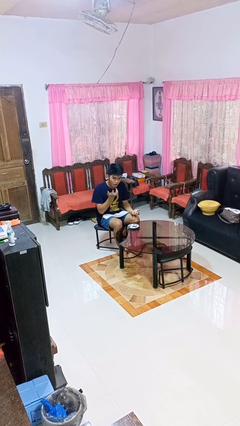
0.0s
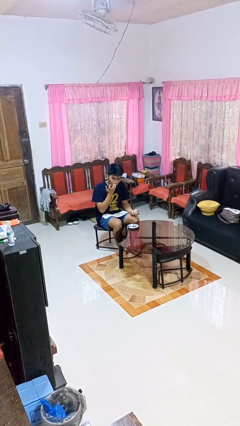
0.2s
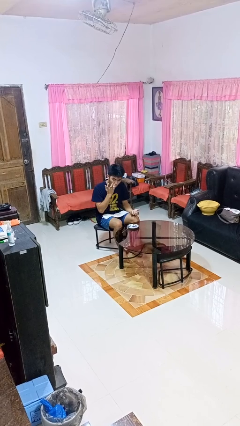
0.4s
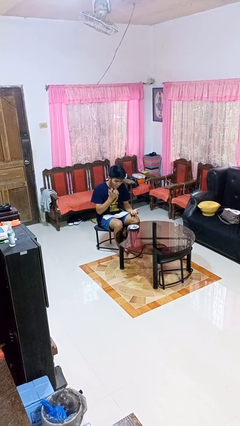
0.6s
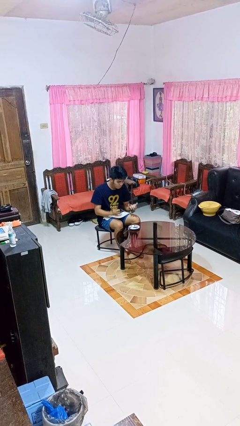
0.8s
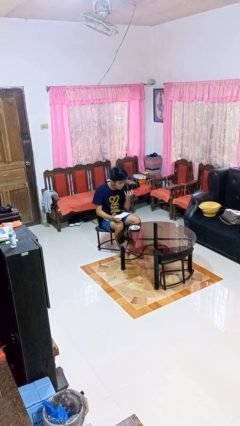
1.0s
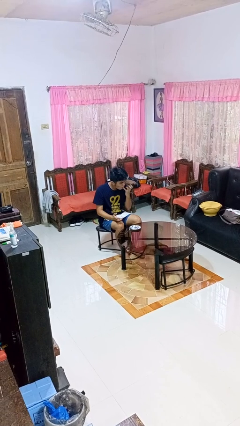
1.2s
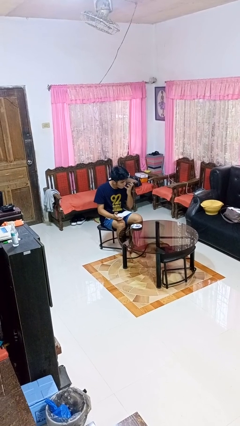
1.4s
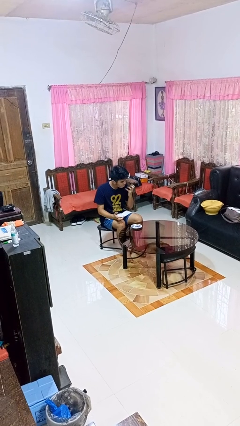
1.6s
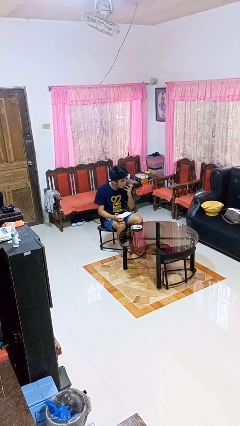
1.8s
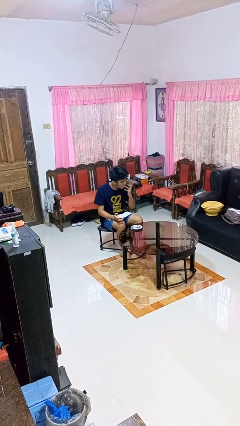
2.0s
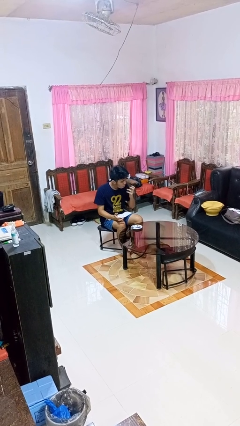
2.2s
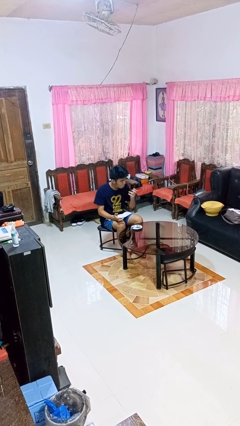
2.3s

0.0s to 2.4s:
person licks fingers

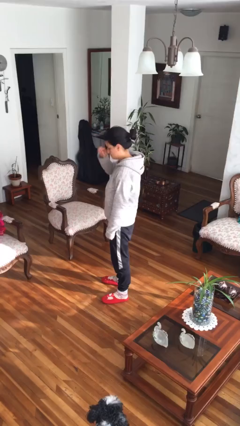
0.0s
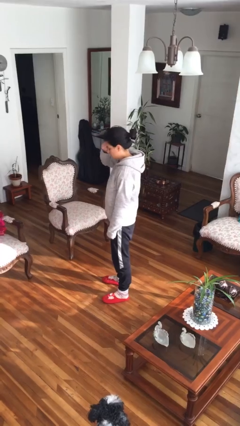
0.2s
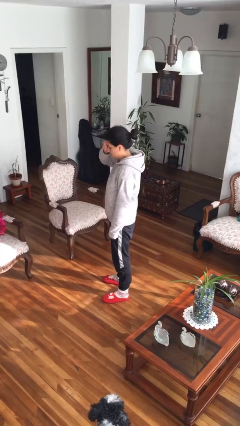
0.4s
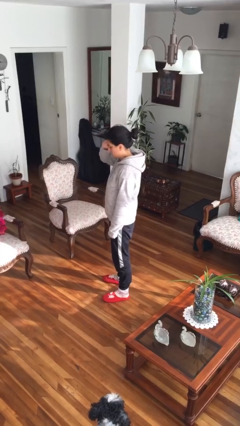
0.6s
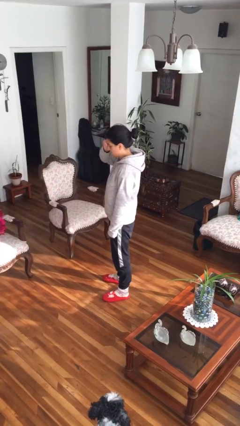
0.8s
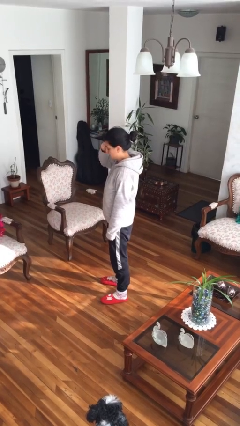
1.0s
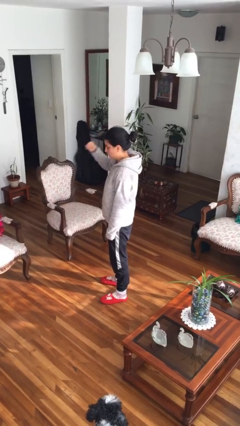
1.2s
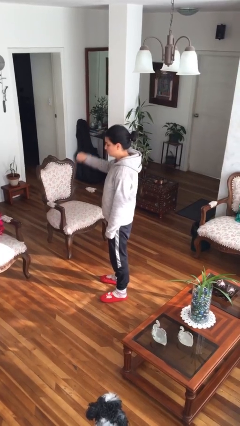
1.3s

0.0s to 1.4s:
person rubs eyes

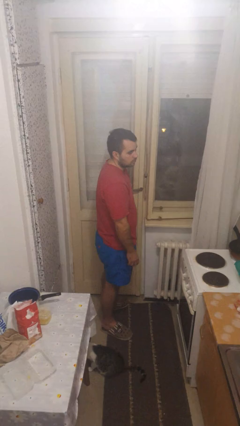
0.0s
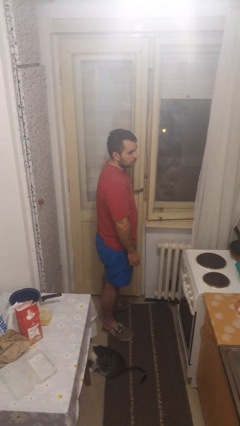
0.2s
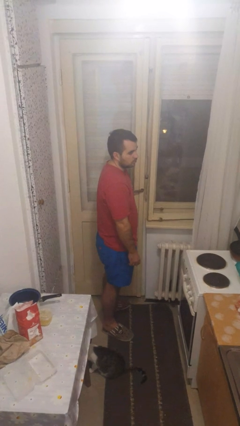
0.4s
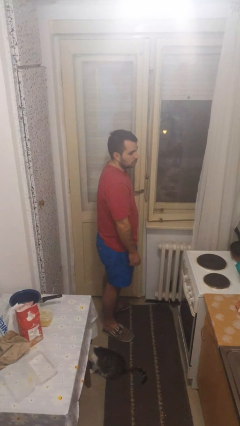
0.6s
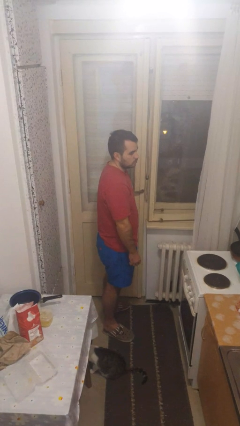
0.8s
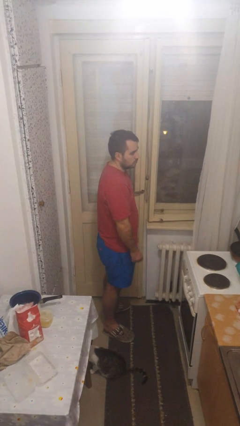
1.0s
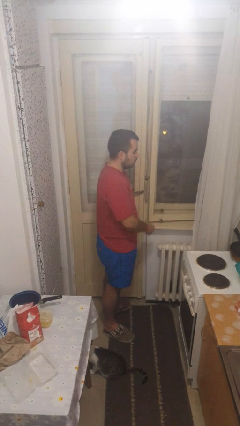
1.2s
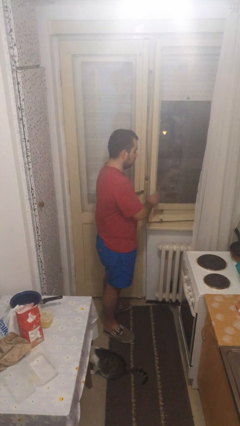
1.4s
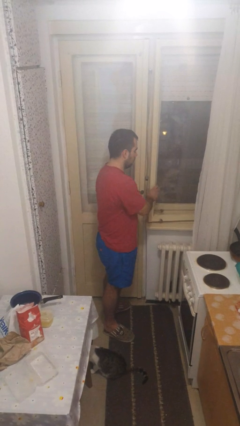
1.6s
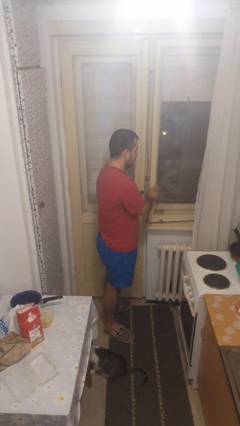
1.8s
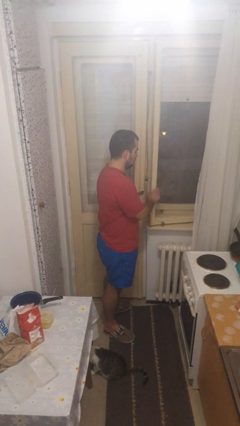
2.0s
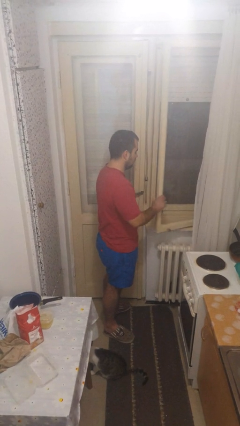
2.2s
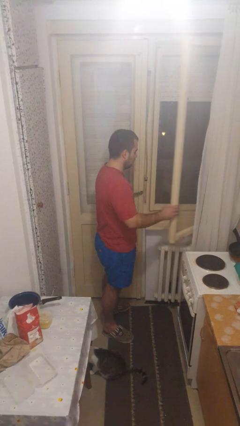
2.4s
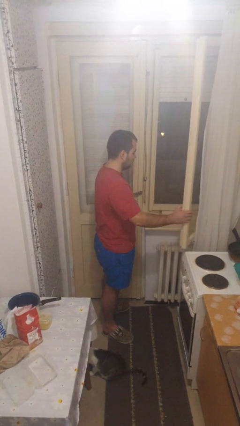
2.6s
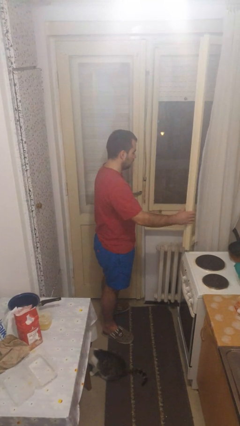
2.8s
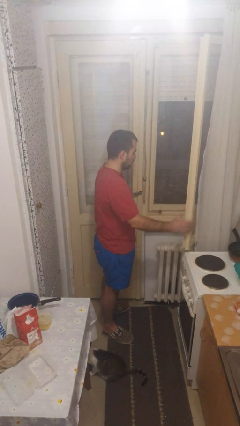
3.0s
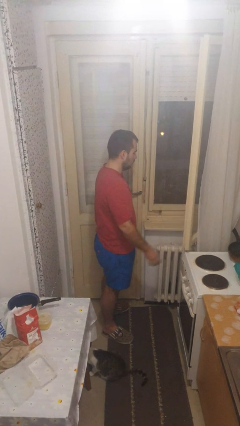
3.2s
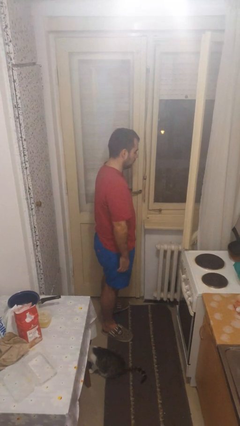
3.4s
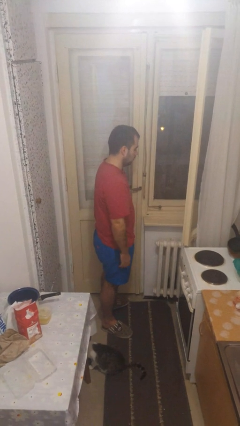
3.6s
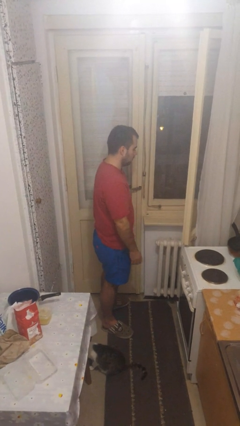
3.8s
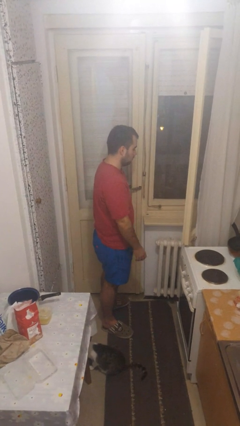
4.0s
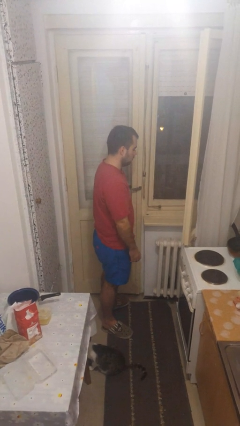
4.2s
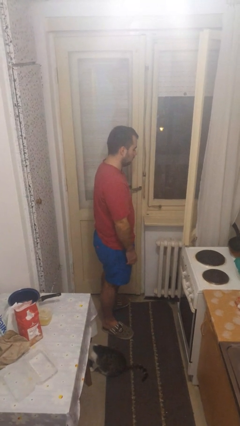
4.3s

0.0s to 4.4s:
person opens home window

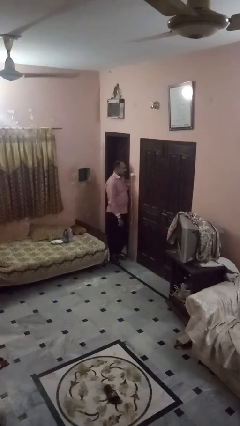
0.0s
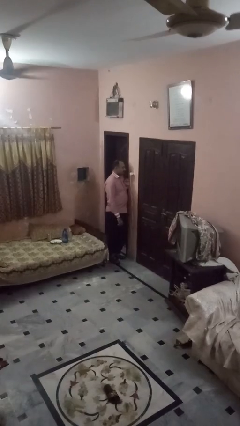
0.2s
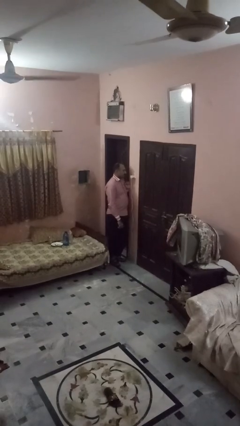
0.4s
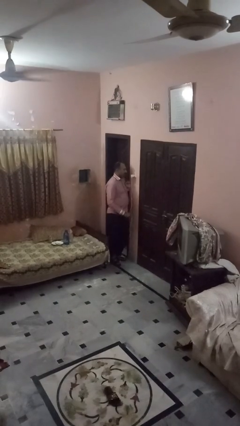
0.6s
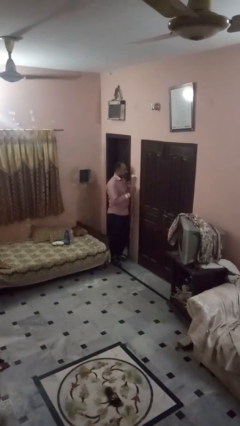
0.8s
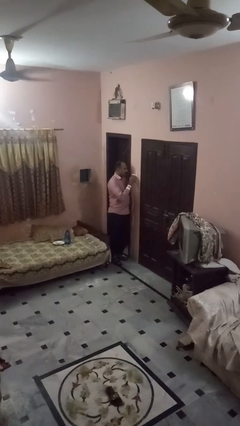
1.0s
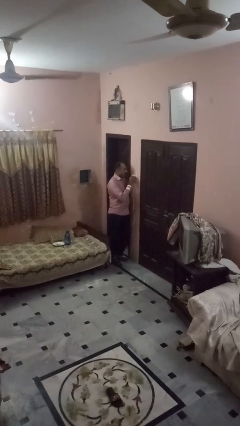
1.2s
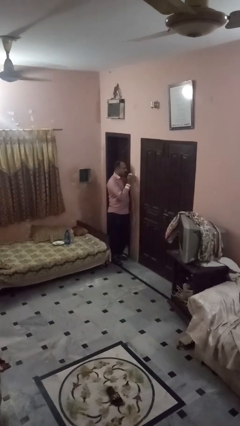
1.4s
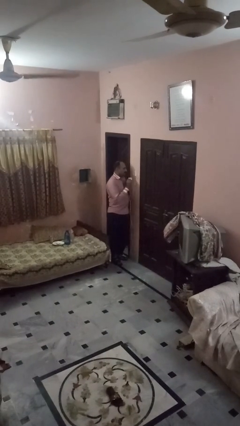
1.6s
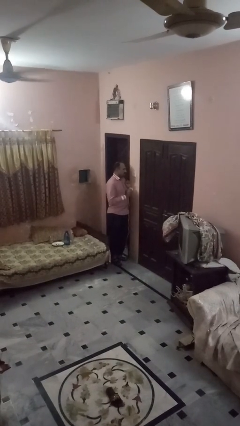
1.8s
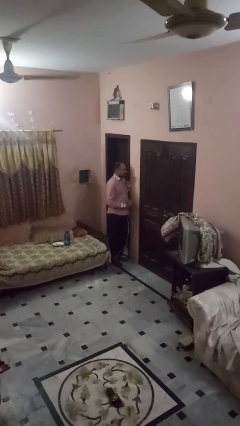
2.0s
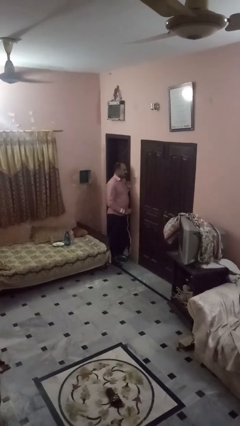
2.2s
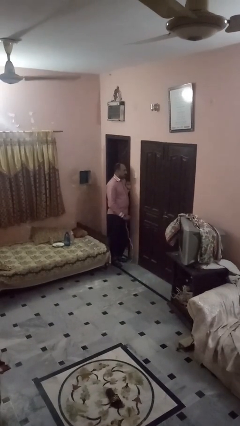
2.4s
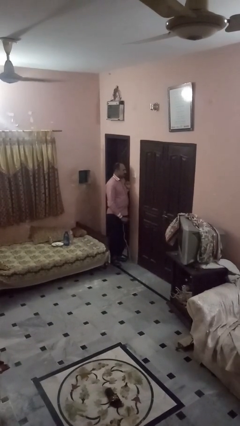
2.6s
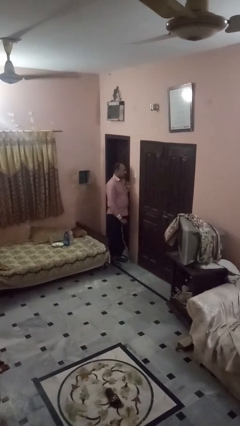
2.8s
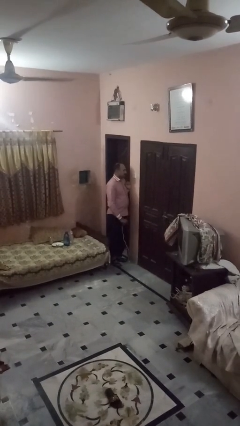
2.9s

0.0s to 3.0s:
person unplugs from electrical socket

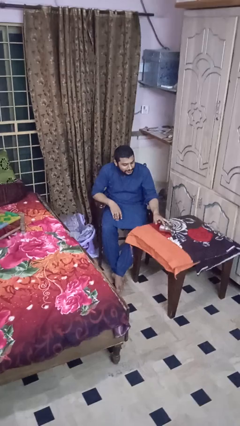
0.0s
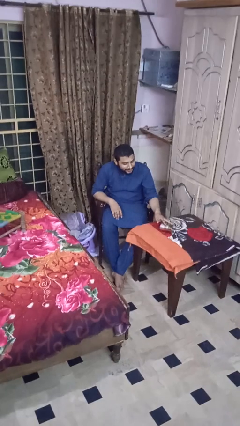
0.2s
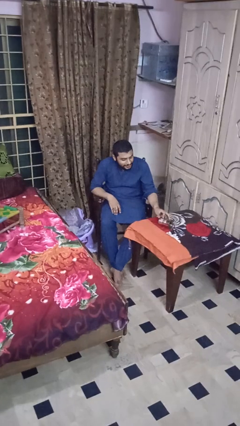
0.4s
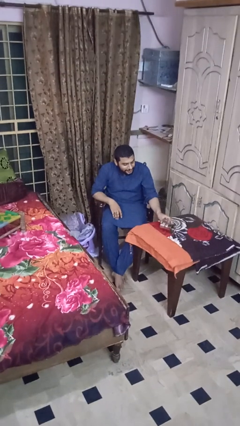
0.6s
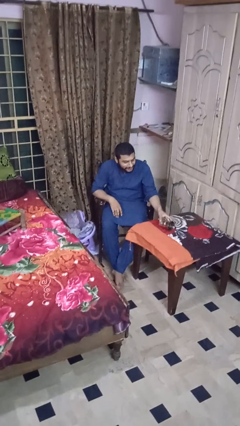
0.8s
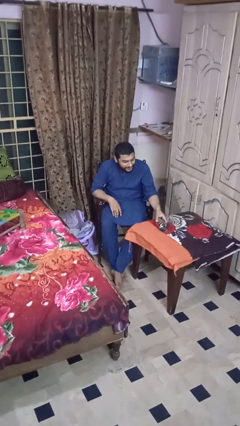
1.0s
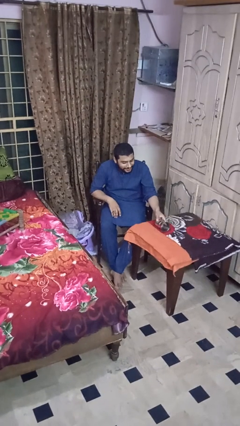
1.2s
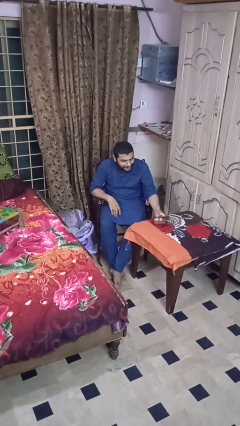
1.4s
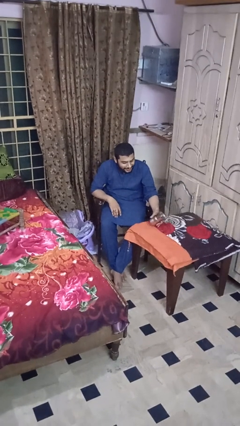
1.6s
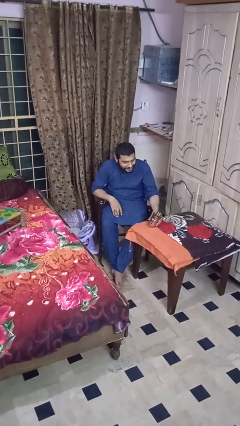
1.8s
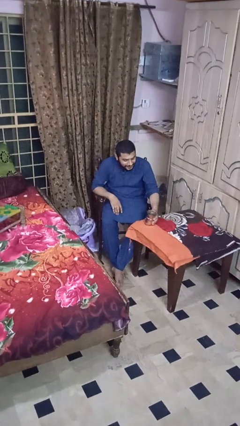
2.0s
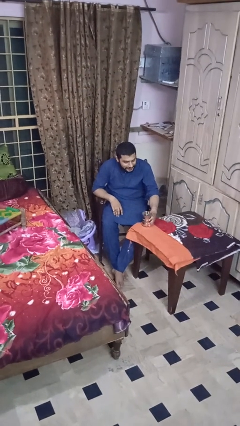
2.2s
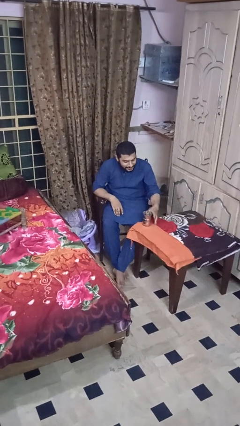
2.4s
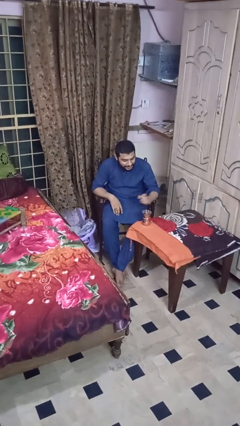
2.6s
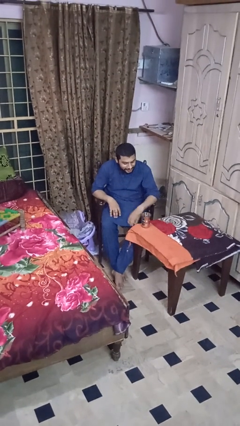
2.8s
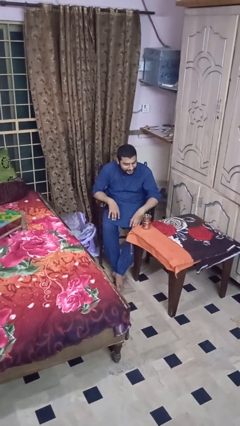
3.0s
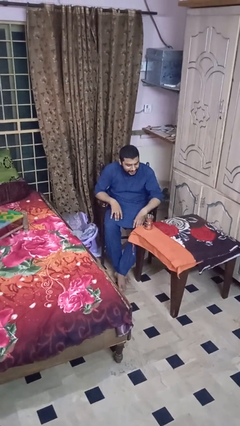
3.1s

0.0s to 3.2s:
person sets upright glass

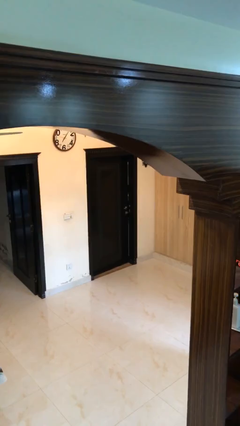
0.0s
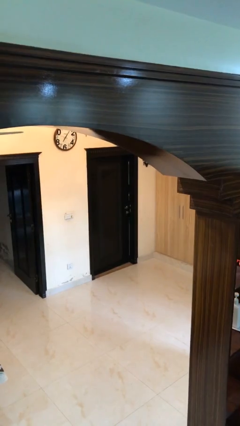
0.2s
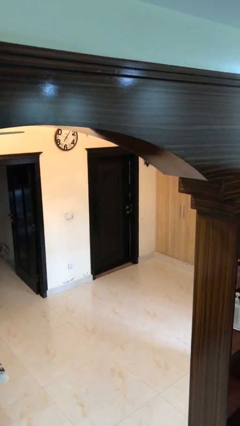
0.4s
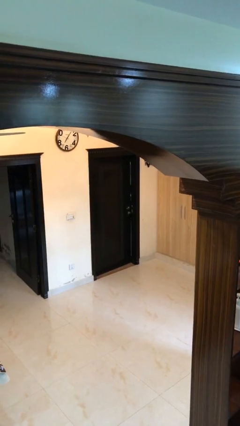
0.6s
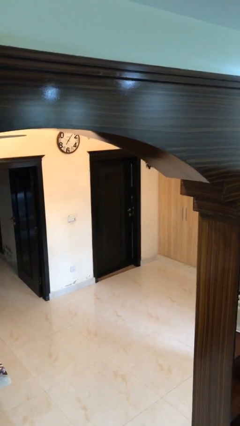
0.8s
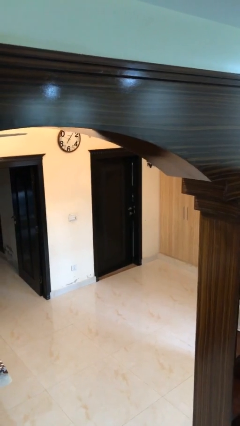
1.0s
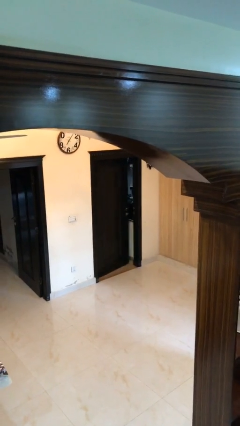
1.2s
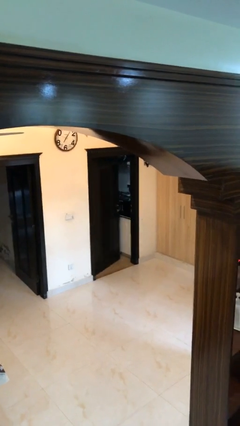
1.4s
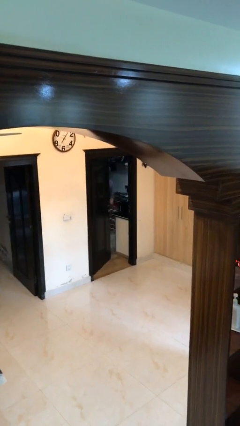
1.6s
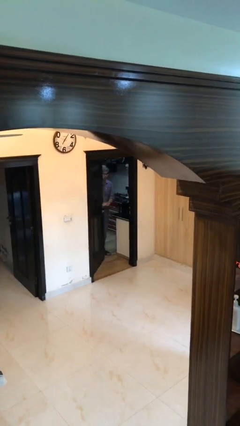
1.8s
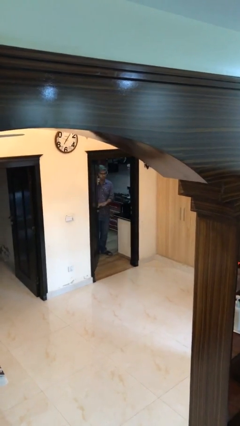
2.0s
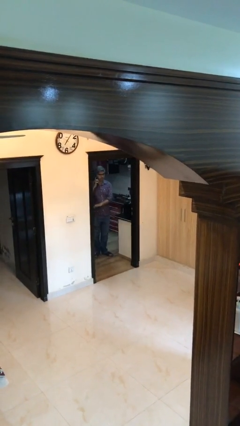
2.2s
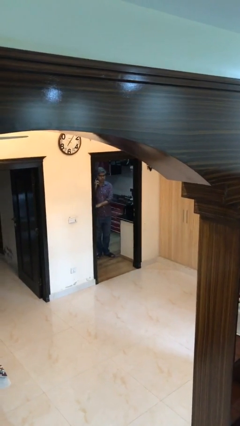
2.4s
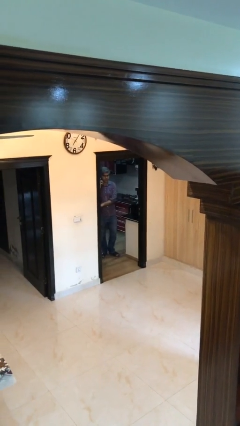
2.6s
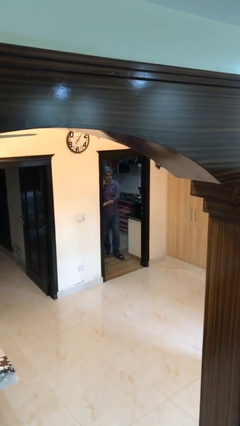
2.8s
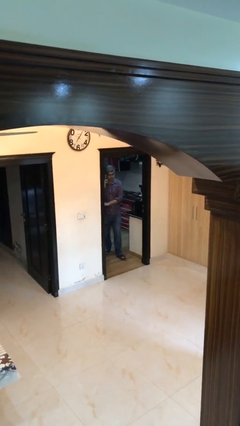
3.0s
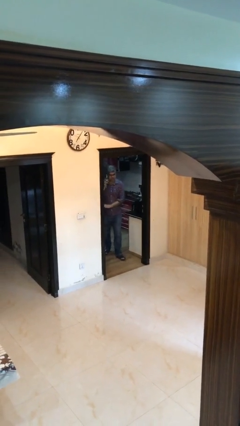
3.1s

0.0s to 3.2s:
person opens facility door
